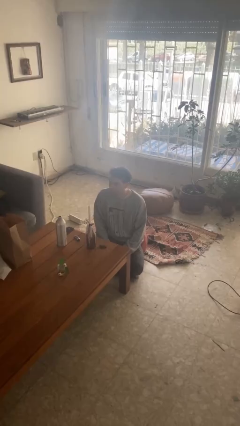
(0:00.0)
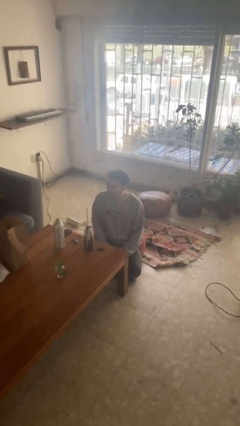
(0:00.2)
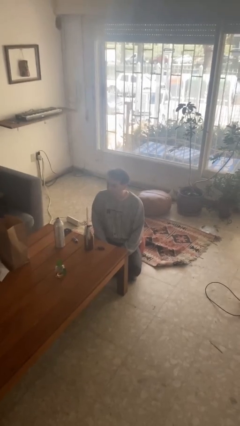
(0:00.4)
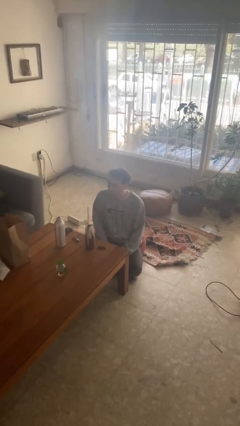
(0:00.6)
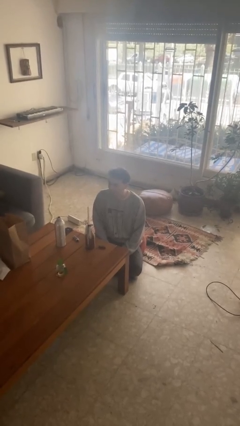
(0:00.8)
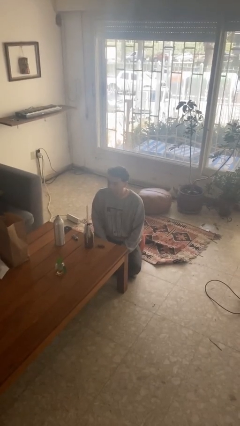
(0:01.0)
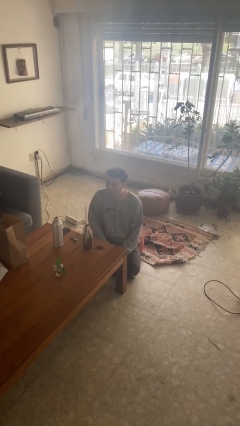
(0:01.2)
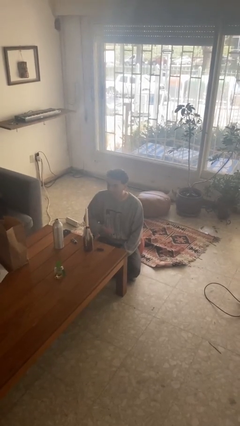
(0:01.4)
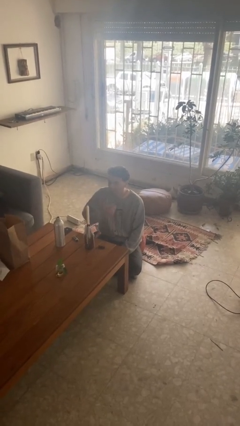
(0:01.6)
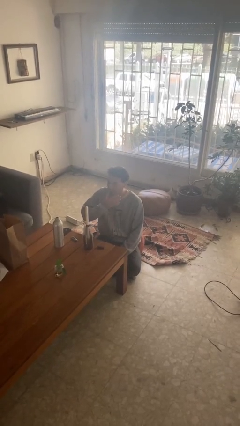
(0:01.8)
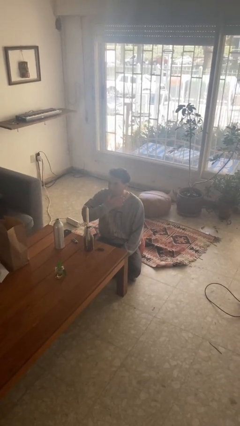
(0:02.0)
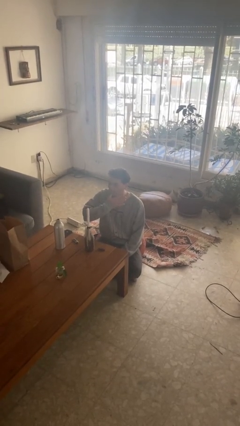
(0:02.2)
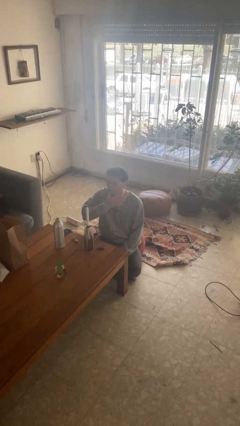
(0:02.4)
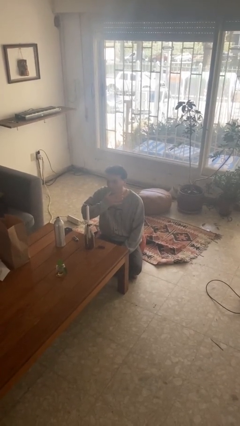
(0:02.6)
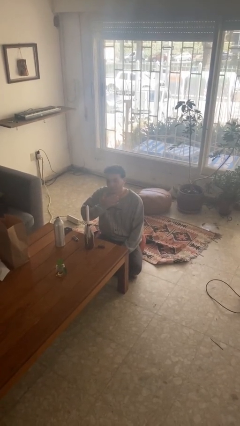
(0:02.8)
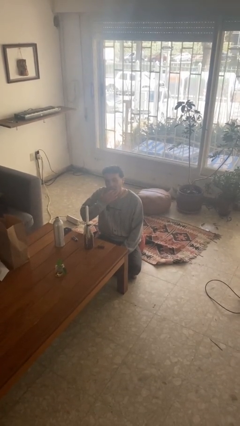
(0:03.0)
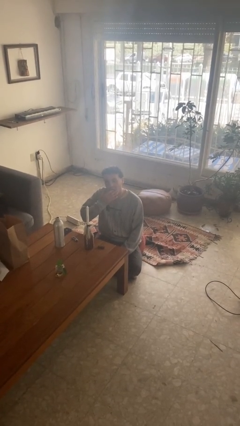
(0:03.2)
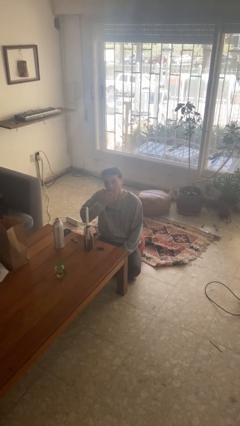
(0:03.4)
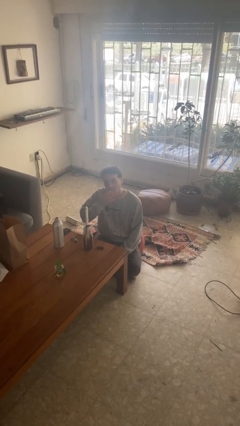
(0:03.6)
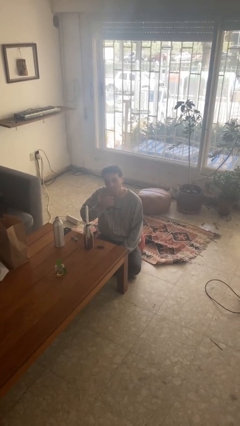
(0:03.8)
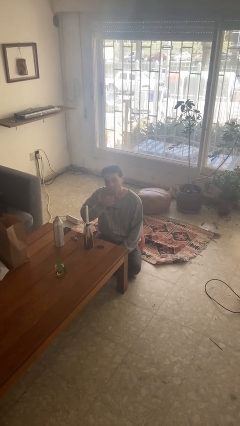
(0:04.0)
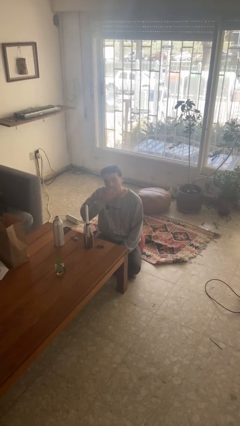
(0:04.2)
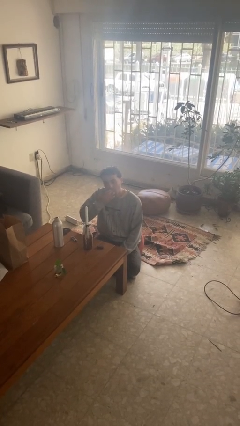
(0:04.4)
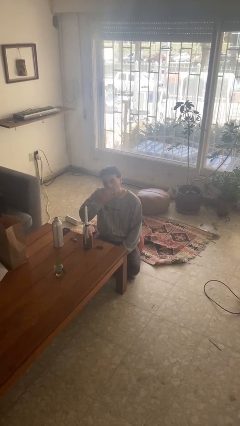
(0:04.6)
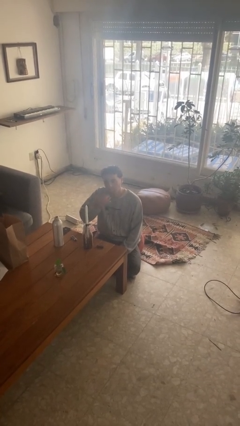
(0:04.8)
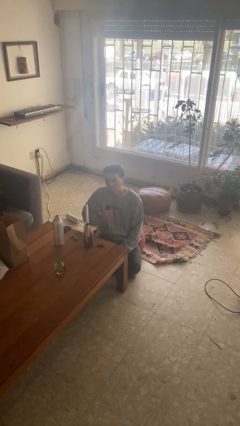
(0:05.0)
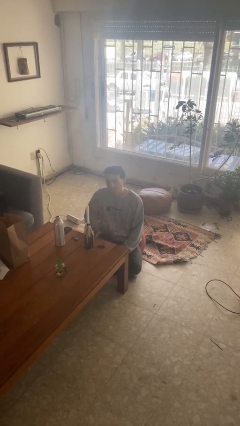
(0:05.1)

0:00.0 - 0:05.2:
person licks fingers

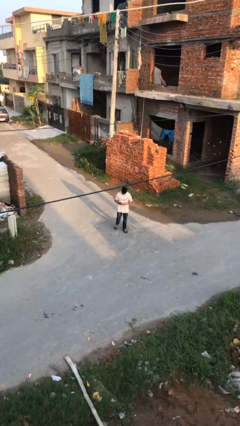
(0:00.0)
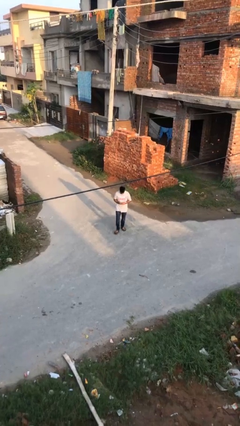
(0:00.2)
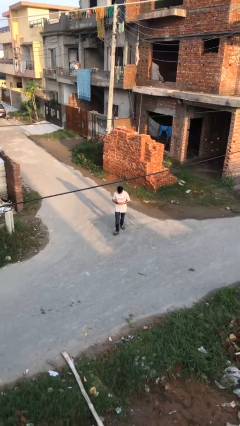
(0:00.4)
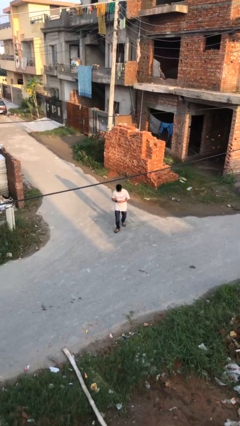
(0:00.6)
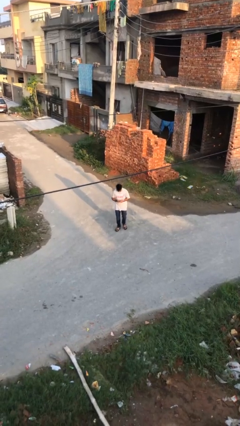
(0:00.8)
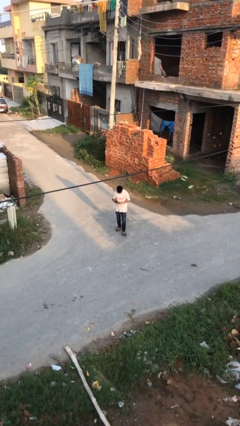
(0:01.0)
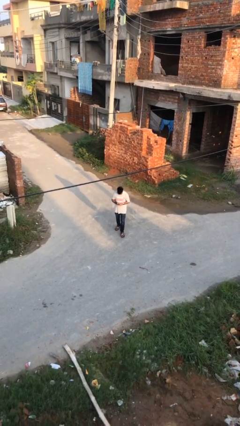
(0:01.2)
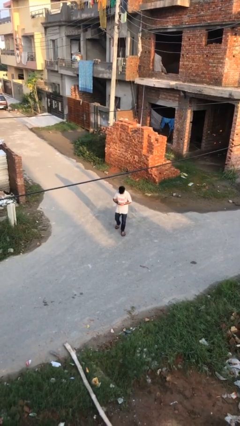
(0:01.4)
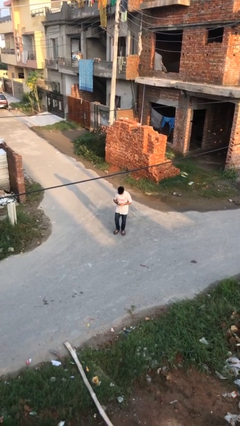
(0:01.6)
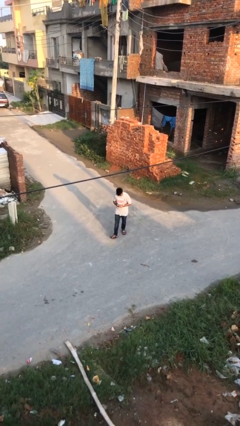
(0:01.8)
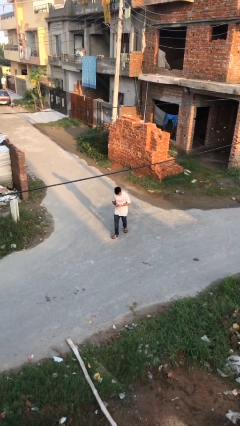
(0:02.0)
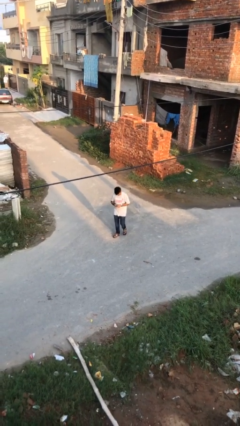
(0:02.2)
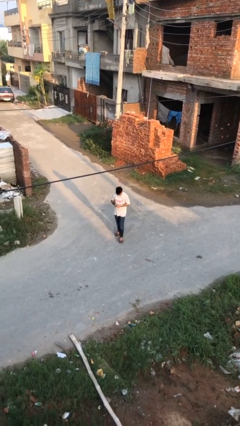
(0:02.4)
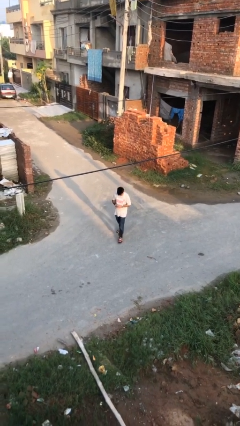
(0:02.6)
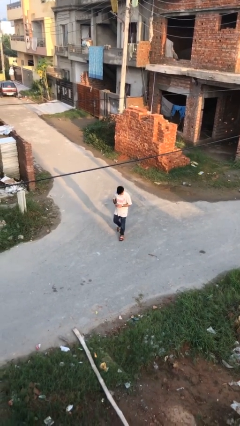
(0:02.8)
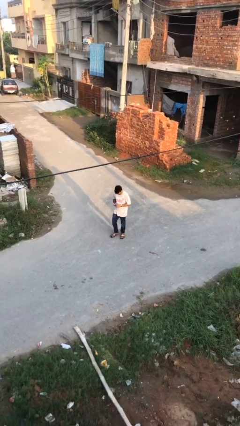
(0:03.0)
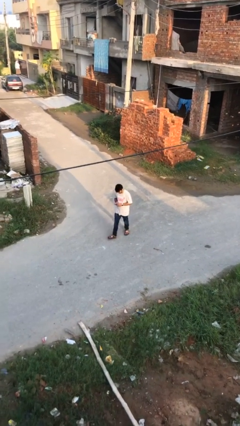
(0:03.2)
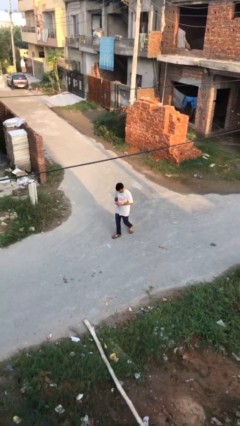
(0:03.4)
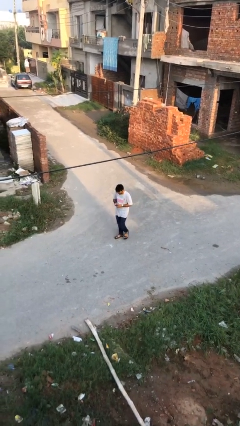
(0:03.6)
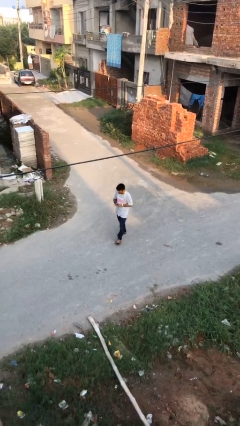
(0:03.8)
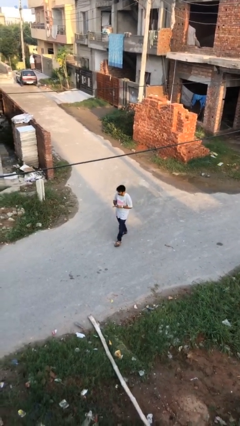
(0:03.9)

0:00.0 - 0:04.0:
person texts on phone

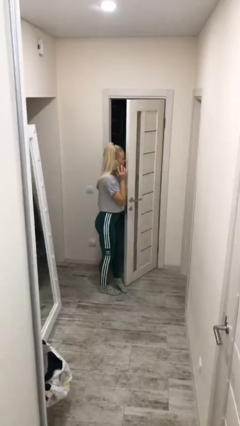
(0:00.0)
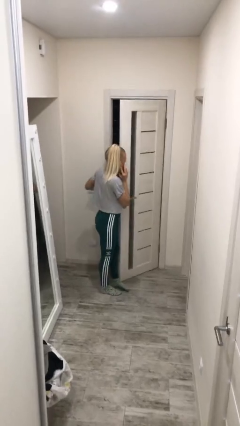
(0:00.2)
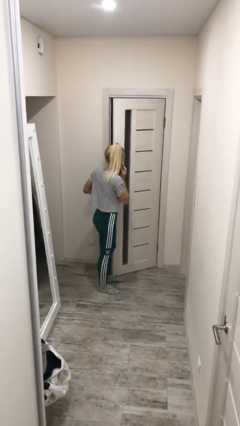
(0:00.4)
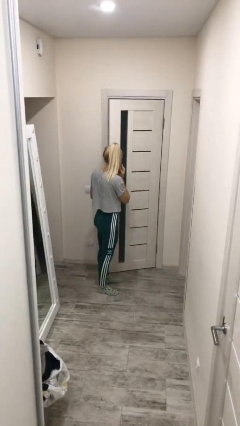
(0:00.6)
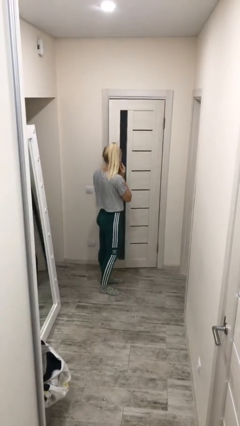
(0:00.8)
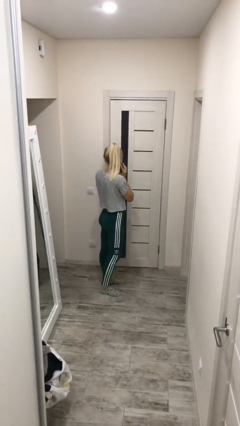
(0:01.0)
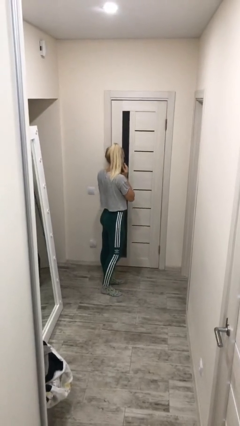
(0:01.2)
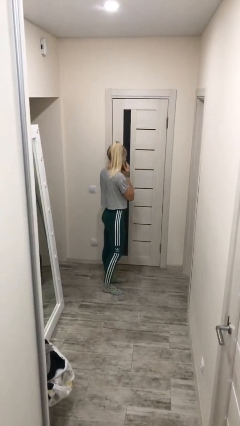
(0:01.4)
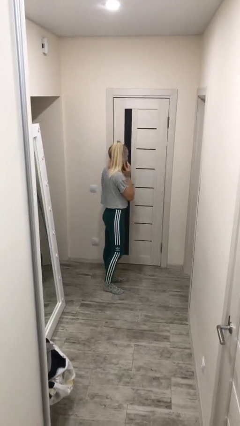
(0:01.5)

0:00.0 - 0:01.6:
person closes facility door

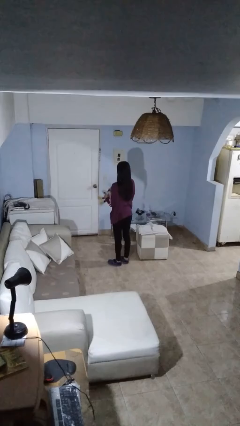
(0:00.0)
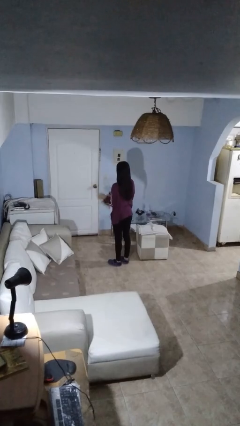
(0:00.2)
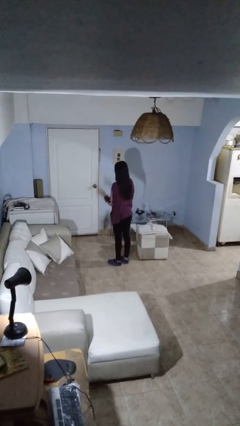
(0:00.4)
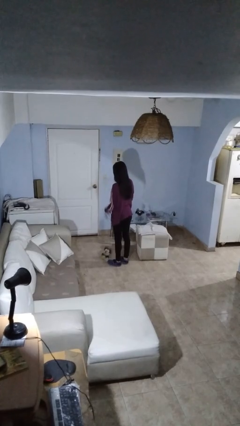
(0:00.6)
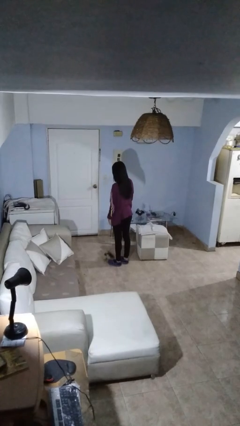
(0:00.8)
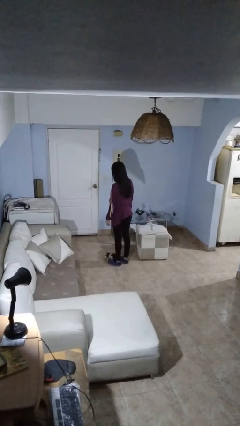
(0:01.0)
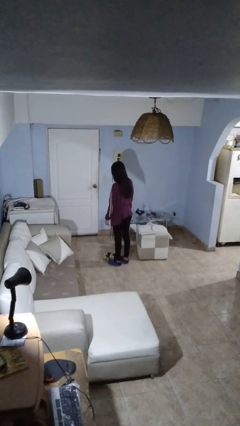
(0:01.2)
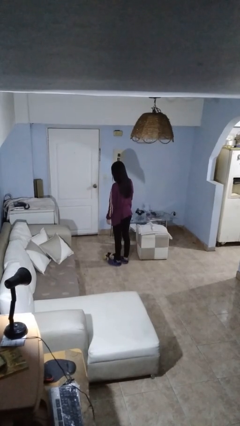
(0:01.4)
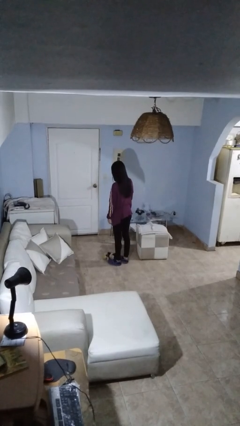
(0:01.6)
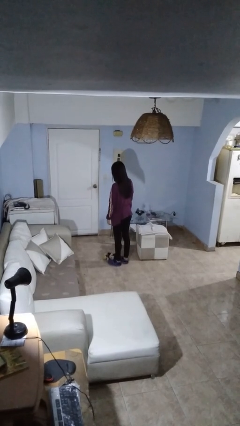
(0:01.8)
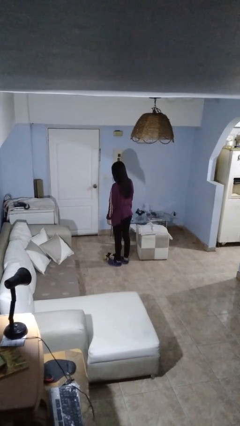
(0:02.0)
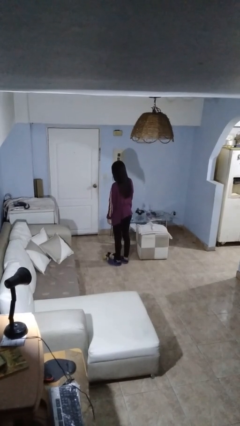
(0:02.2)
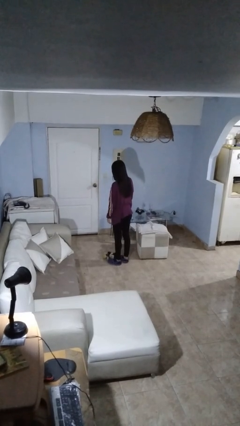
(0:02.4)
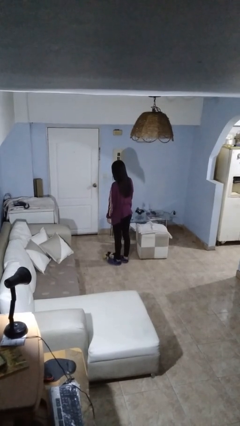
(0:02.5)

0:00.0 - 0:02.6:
person drops object

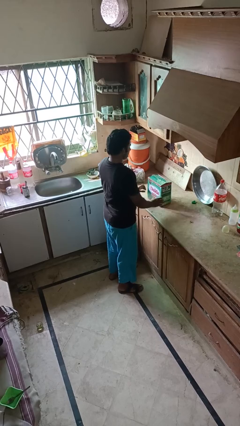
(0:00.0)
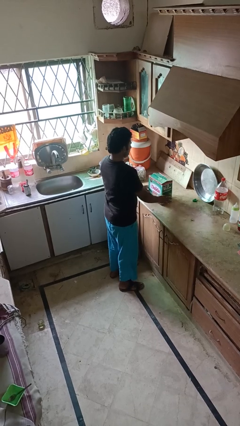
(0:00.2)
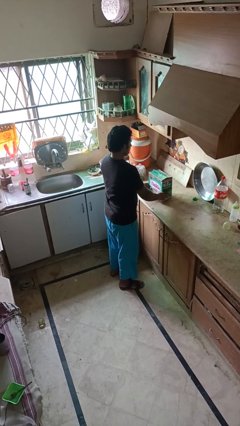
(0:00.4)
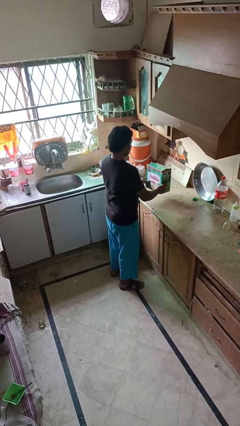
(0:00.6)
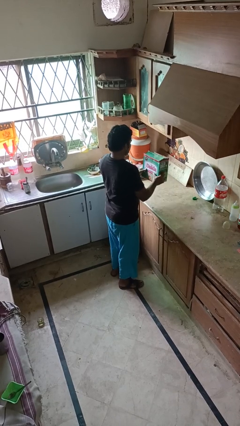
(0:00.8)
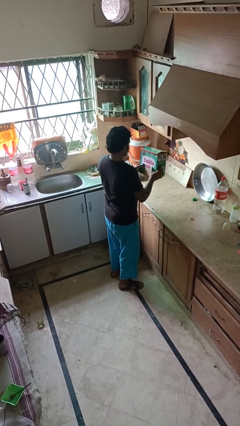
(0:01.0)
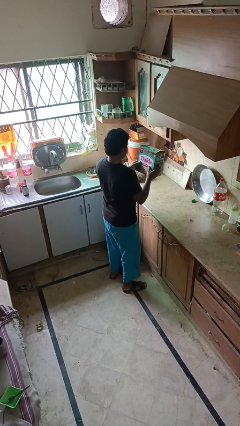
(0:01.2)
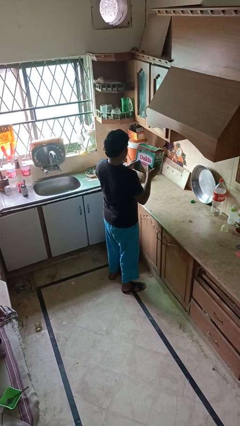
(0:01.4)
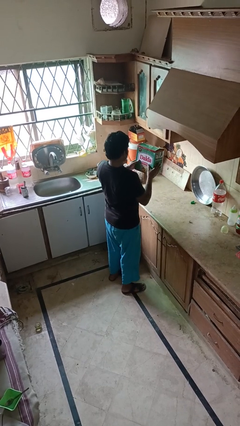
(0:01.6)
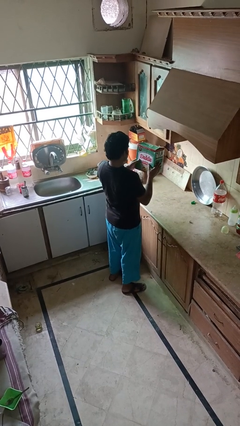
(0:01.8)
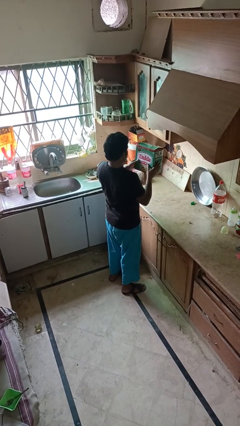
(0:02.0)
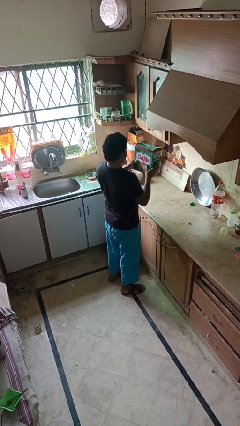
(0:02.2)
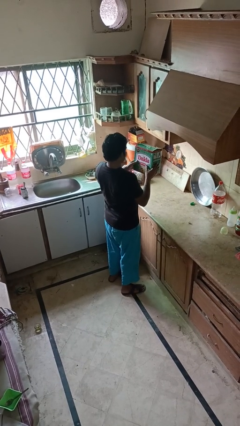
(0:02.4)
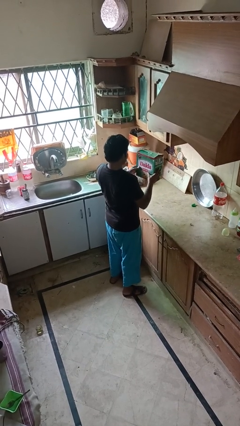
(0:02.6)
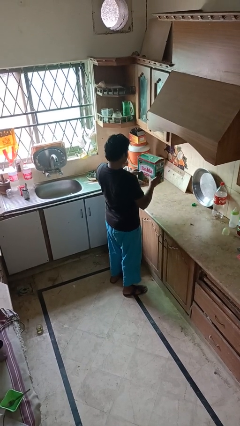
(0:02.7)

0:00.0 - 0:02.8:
person picks up object from countertop

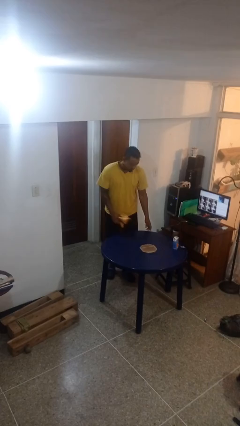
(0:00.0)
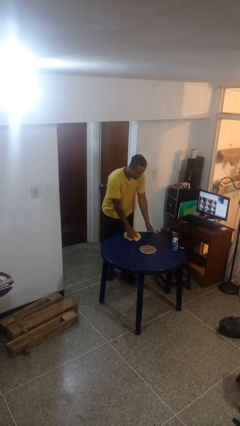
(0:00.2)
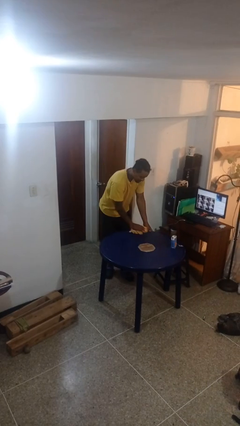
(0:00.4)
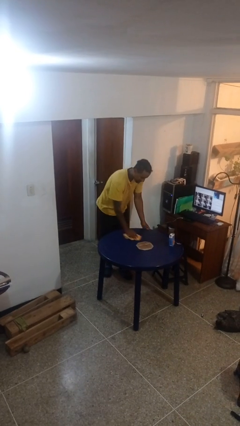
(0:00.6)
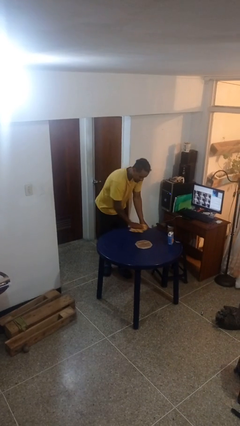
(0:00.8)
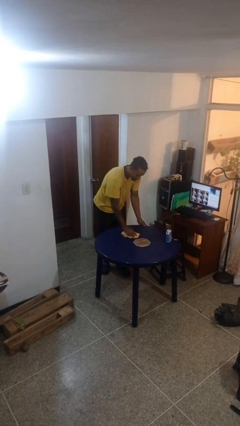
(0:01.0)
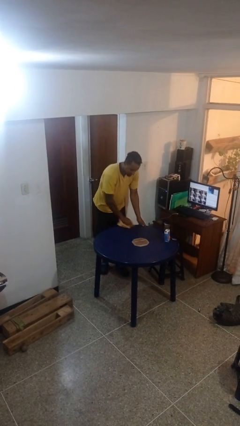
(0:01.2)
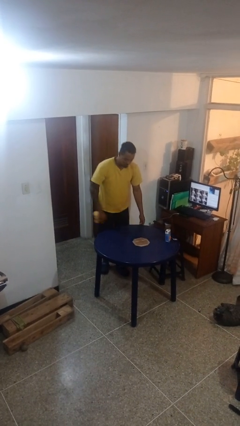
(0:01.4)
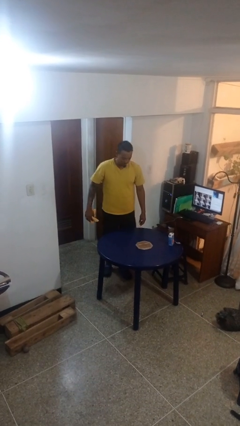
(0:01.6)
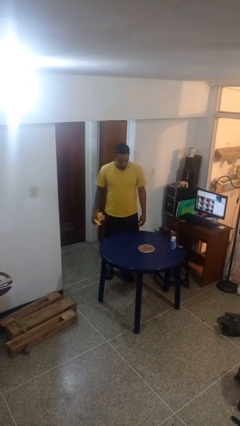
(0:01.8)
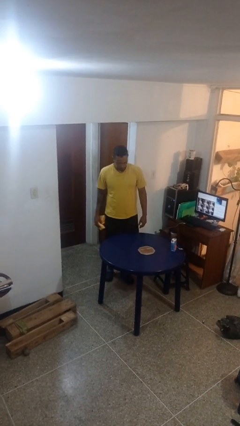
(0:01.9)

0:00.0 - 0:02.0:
person cleans table with rag
